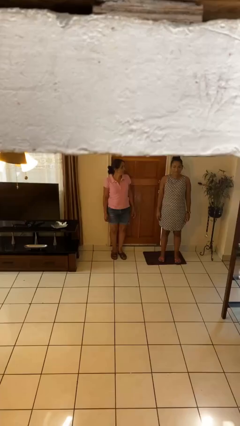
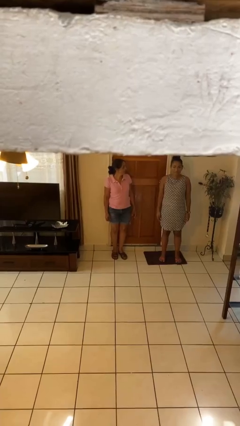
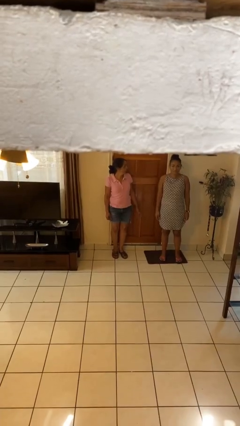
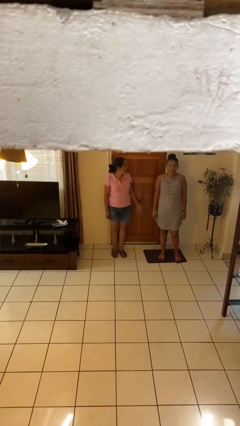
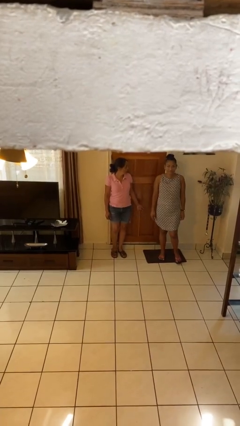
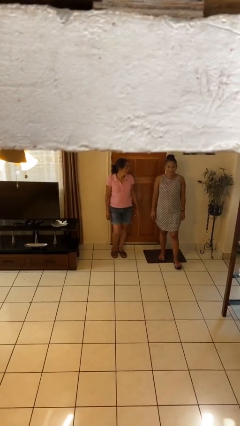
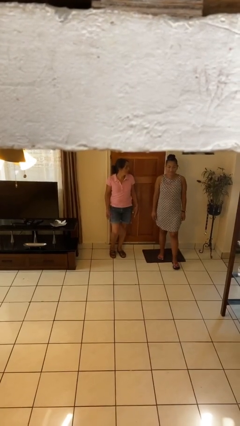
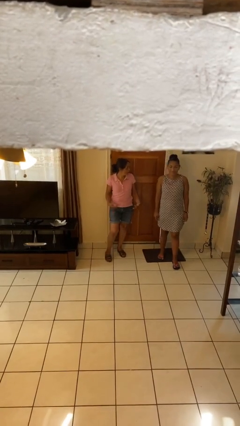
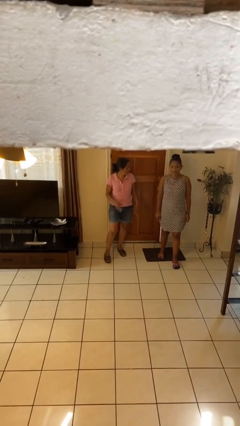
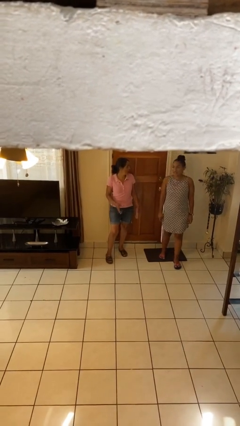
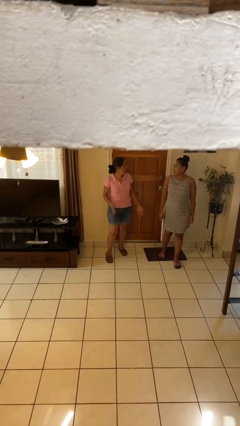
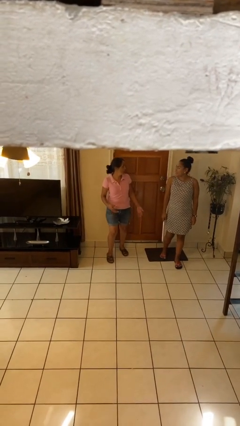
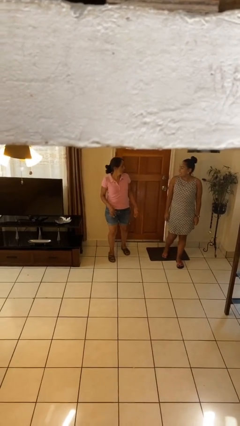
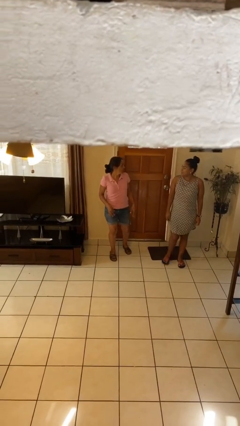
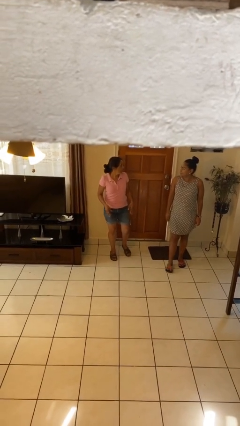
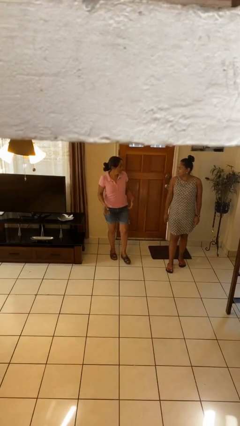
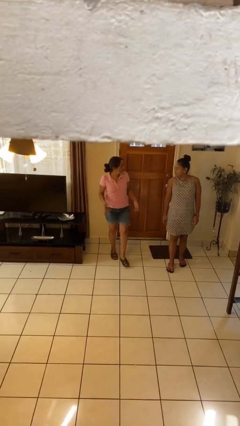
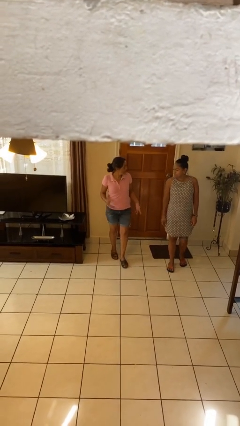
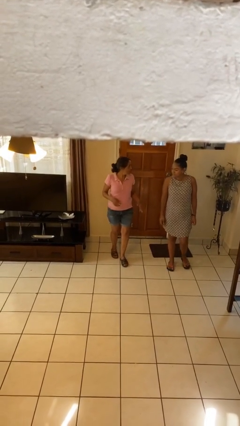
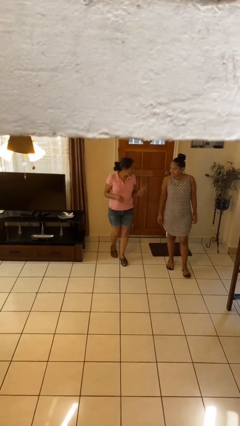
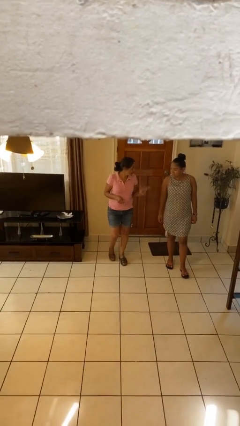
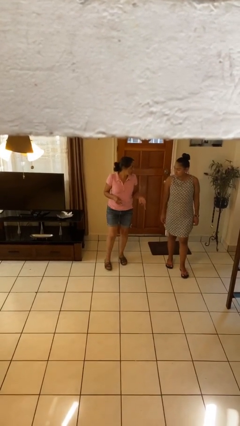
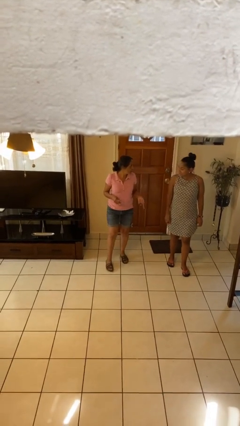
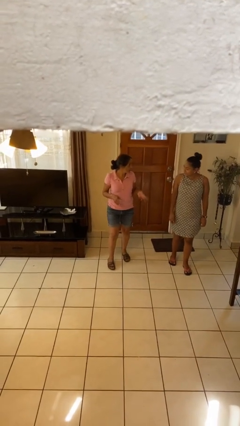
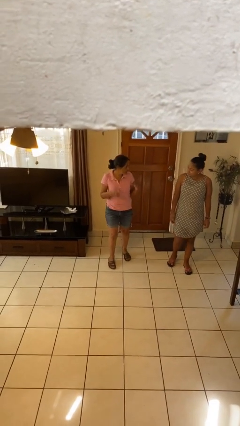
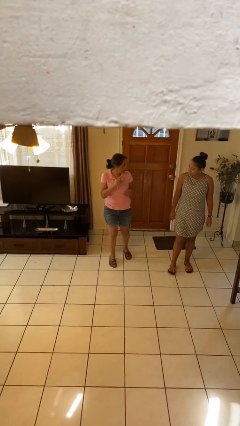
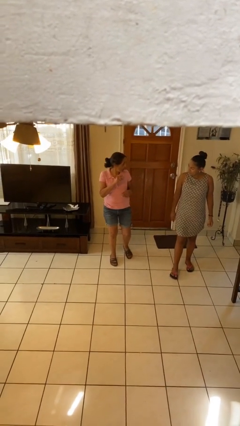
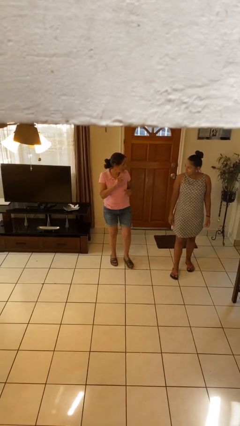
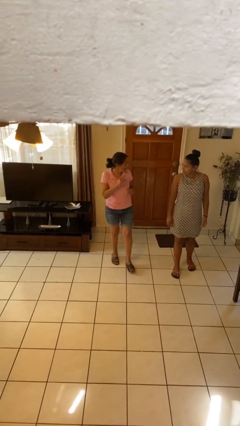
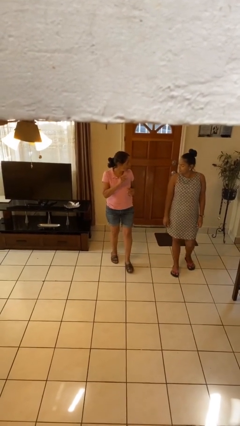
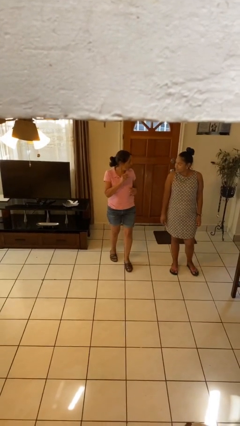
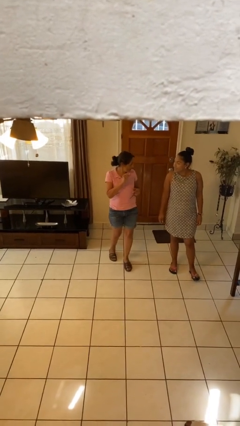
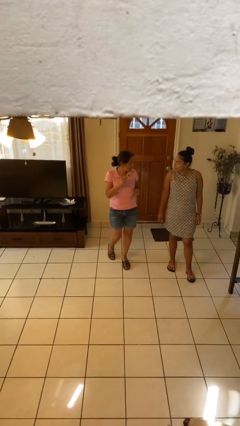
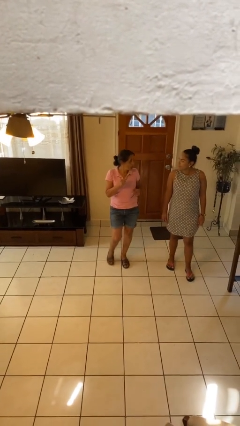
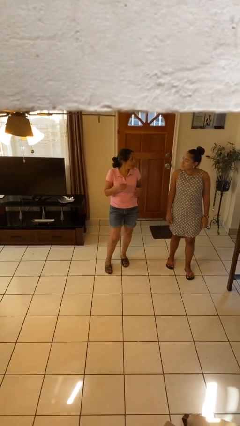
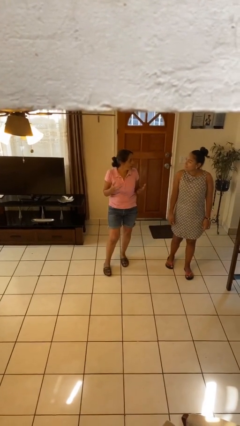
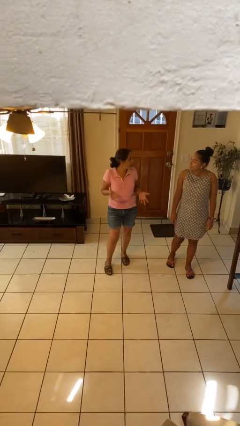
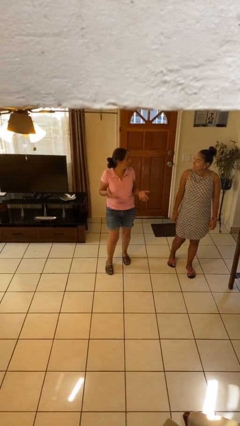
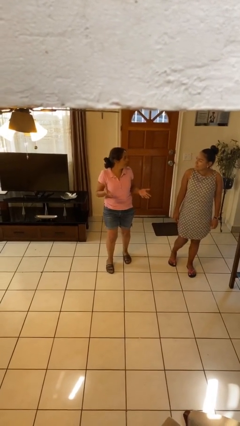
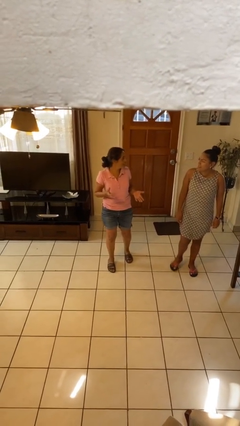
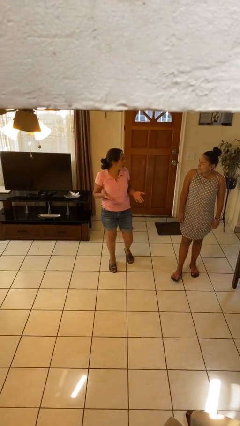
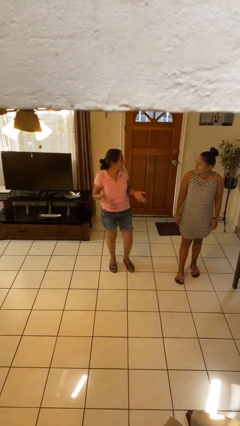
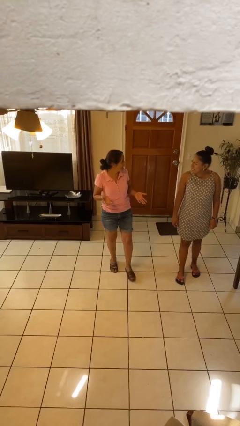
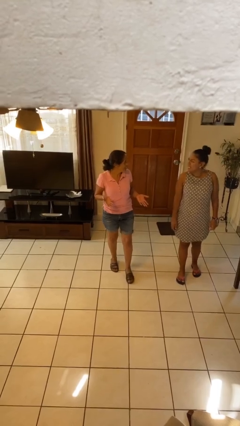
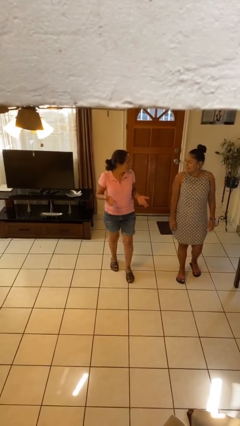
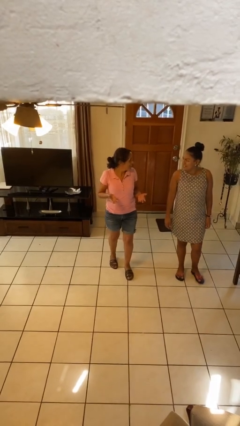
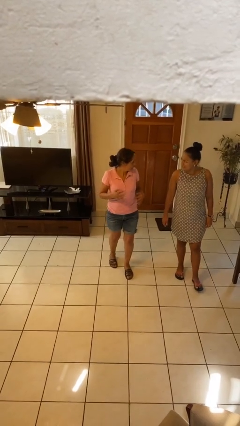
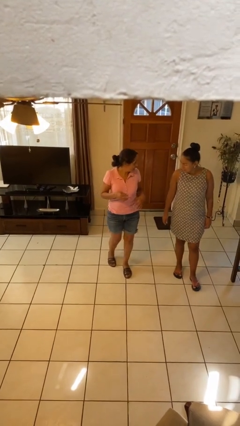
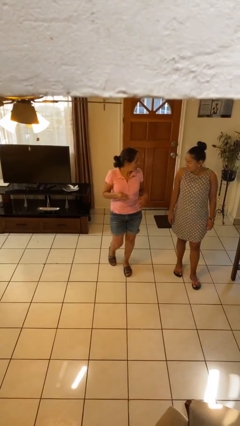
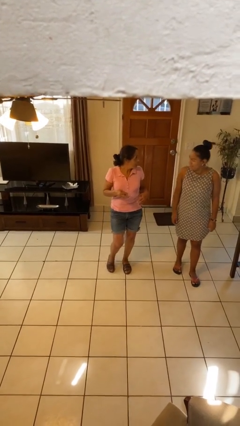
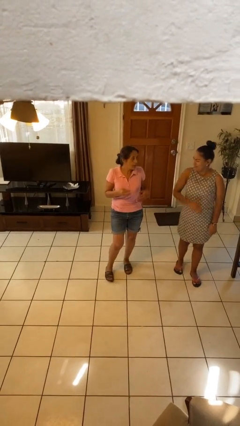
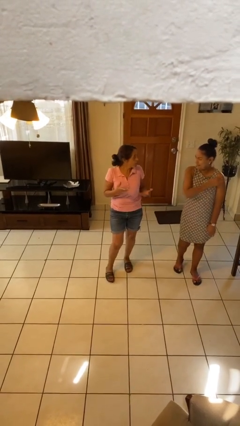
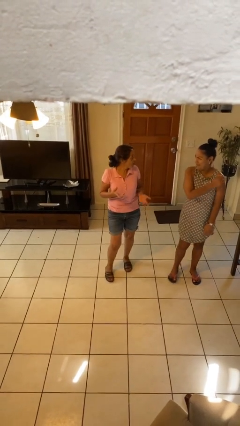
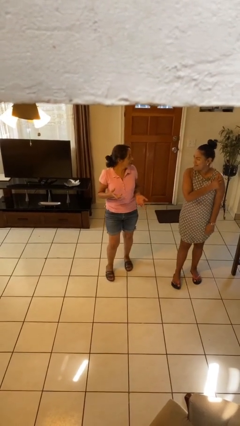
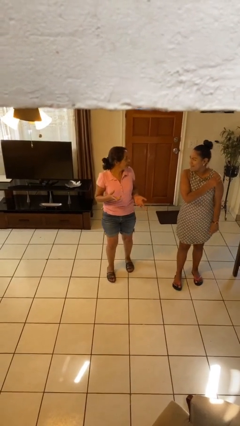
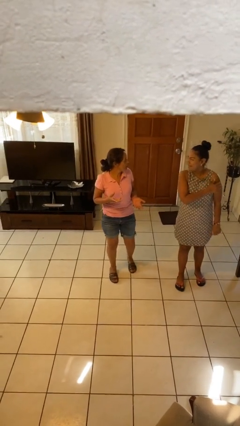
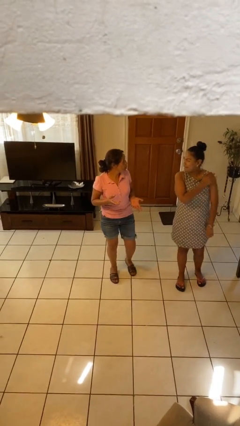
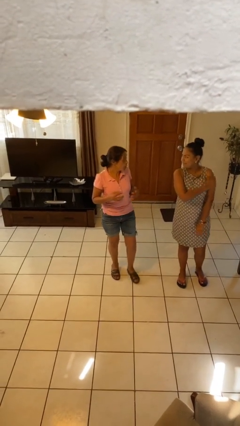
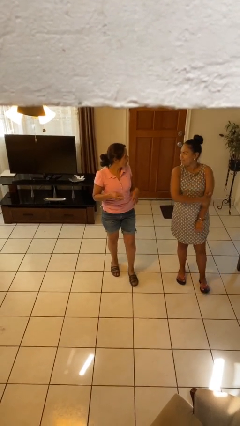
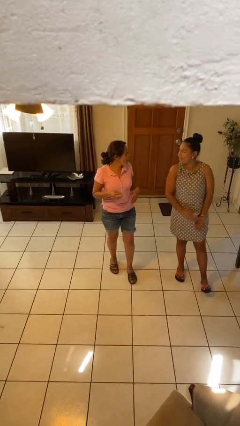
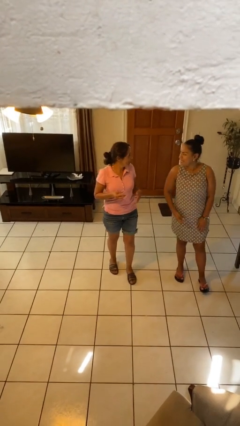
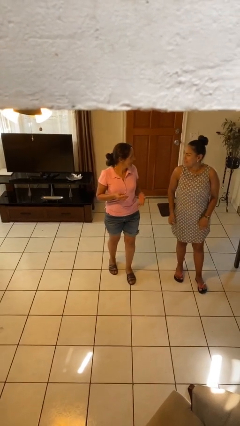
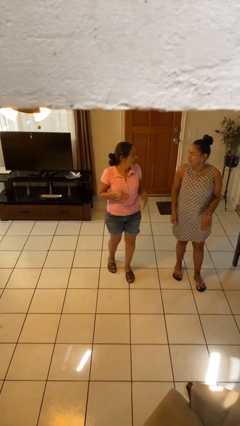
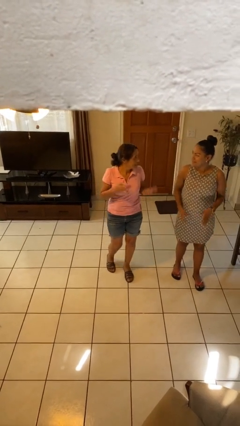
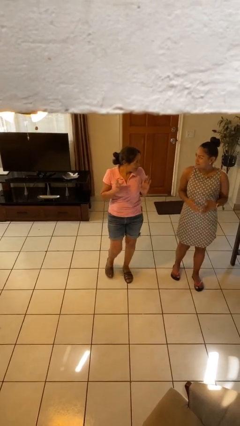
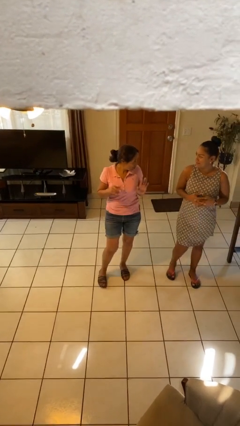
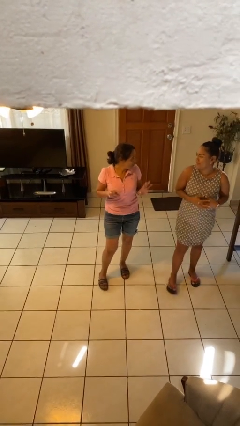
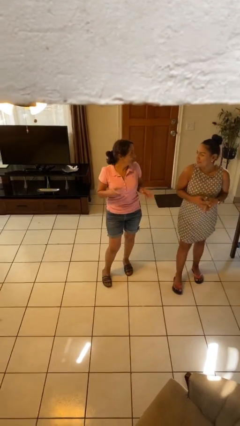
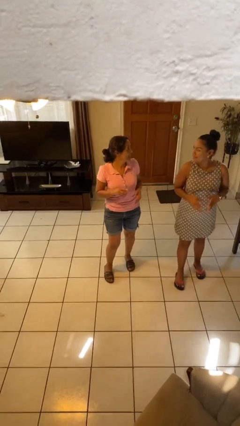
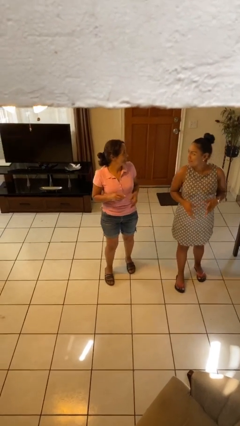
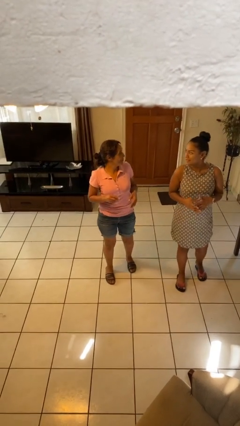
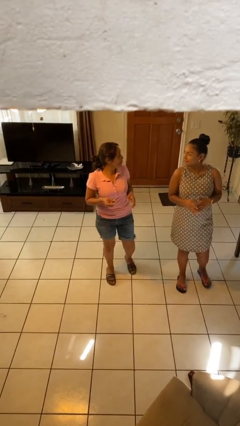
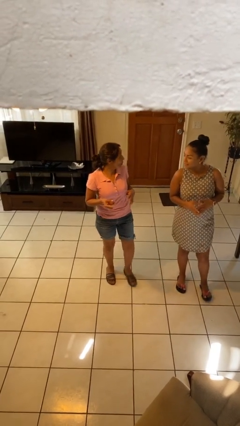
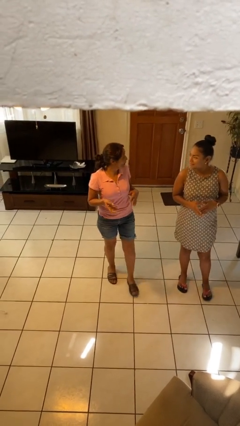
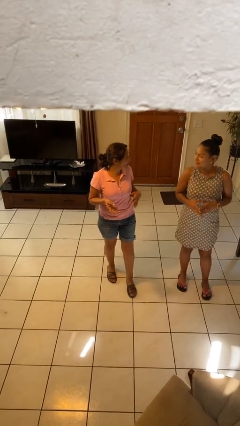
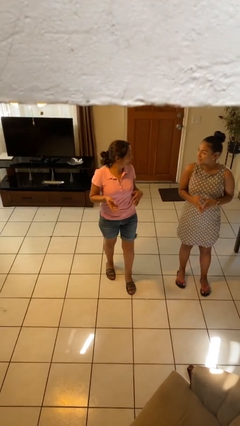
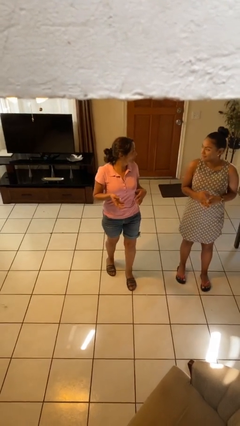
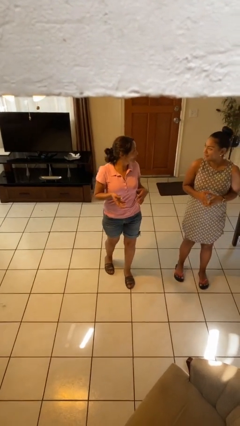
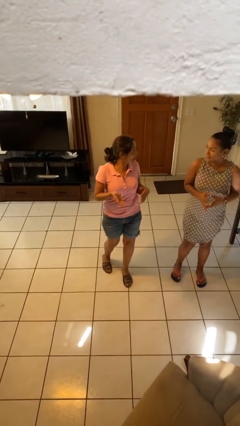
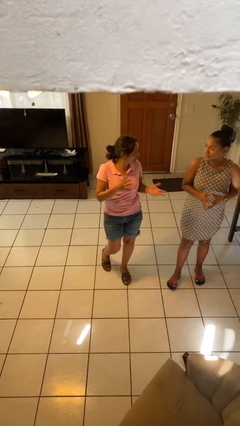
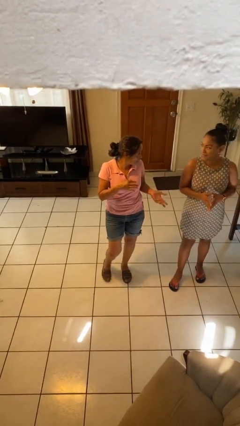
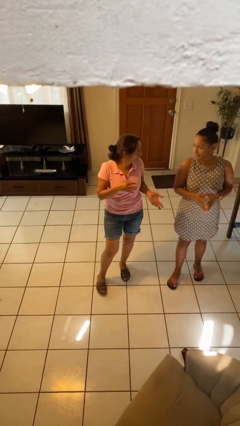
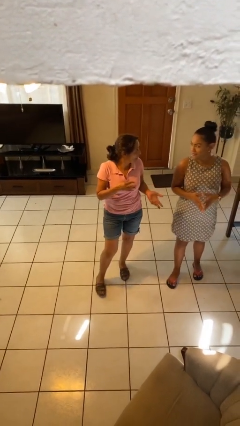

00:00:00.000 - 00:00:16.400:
person talks to person

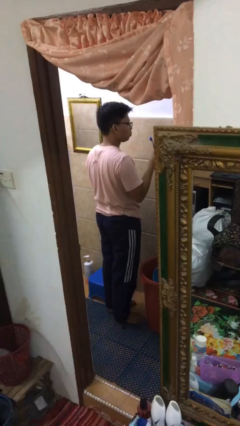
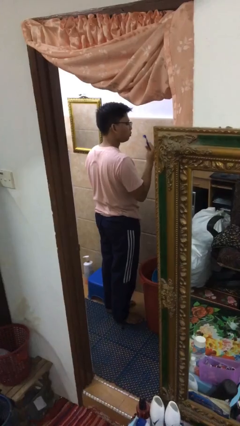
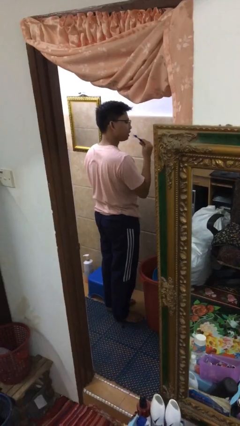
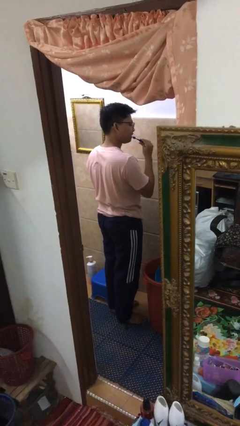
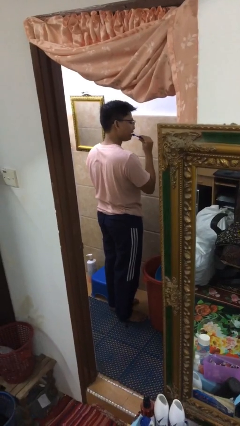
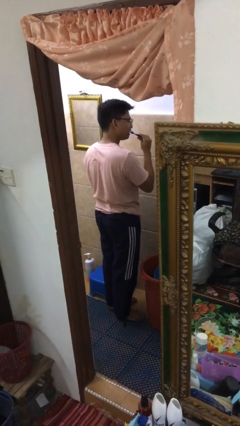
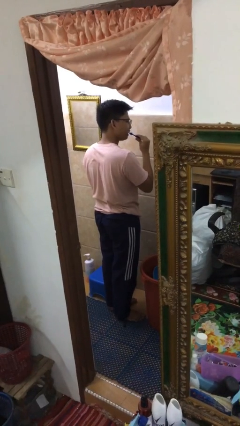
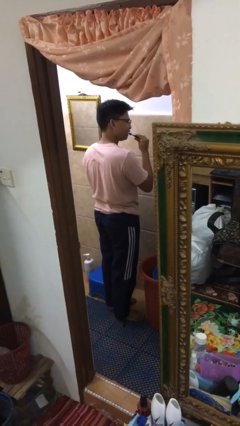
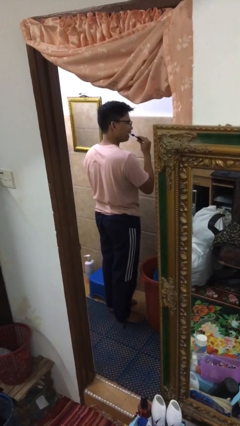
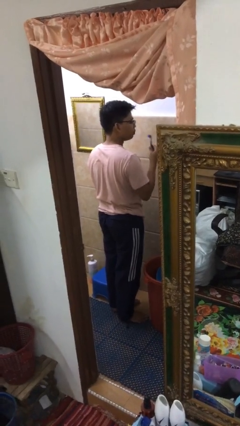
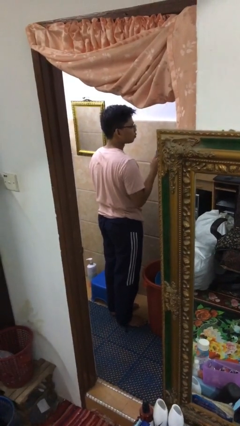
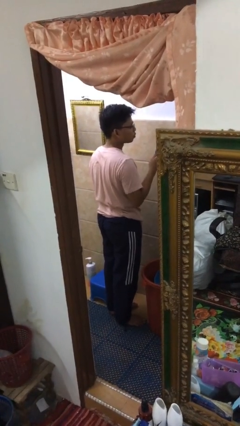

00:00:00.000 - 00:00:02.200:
person brushes teeth
